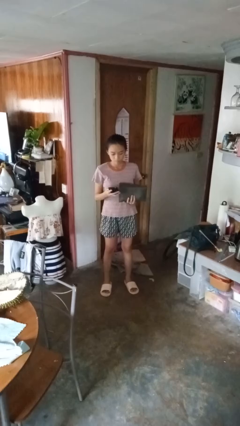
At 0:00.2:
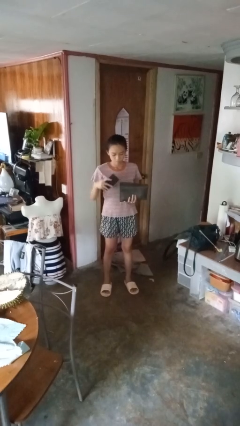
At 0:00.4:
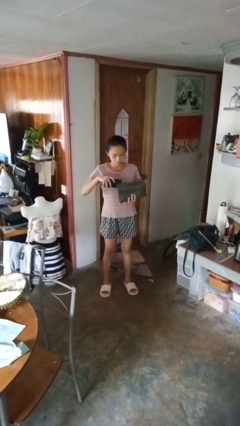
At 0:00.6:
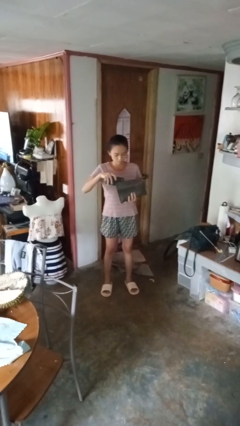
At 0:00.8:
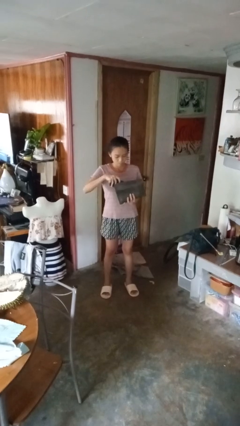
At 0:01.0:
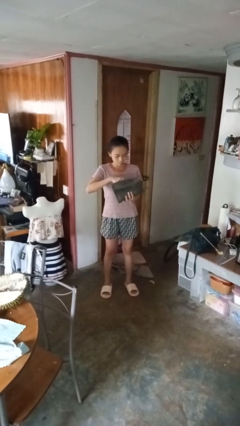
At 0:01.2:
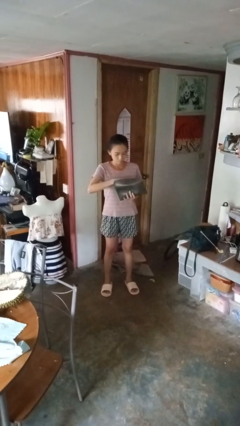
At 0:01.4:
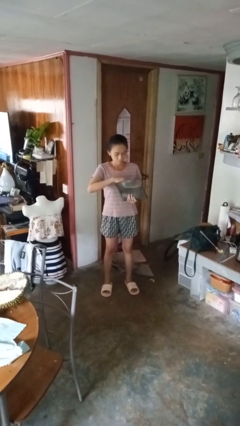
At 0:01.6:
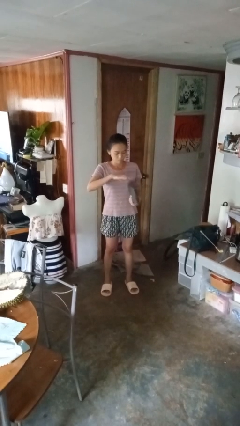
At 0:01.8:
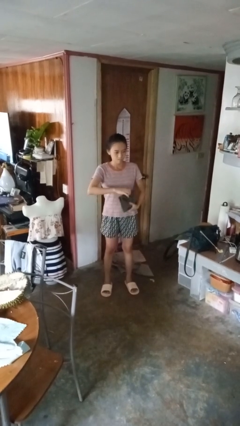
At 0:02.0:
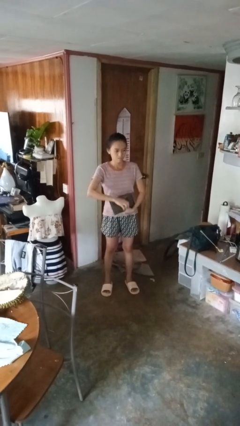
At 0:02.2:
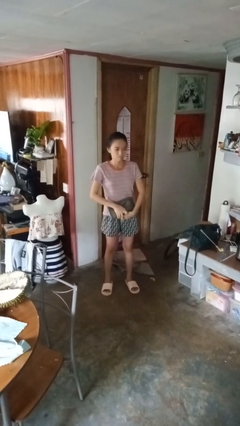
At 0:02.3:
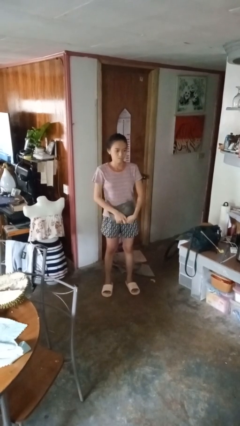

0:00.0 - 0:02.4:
person puts object into purse

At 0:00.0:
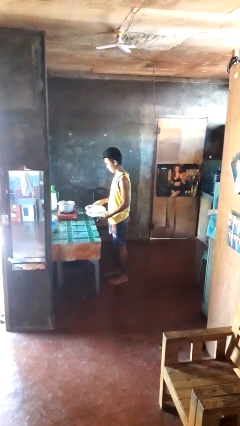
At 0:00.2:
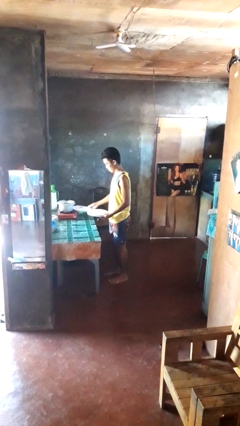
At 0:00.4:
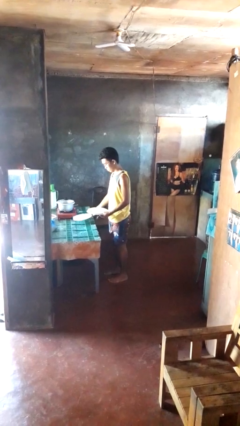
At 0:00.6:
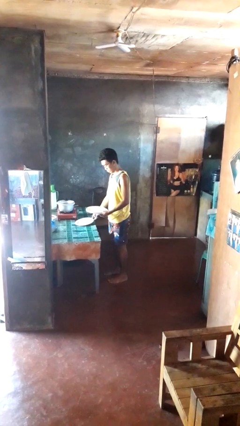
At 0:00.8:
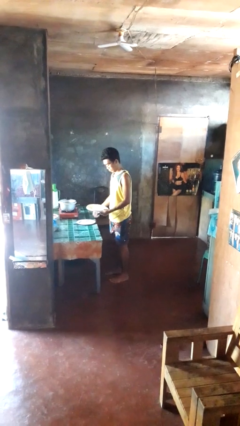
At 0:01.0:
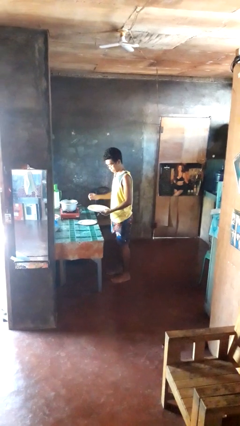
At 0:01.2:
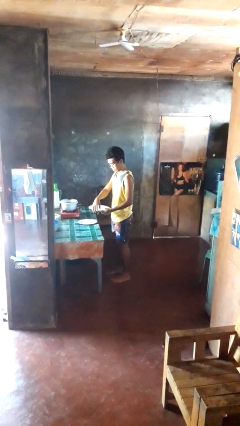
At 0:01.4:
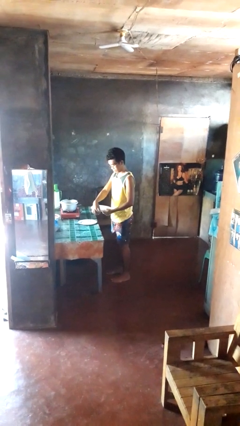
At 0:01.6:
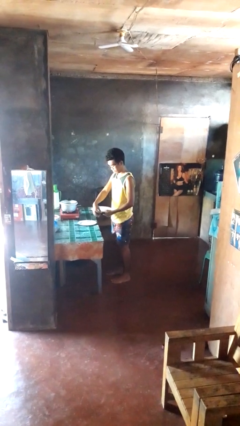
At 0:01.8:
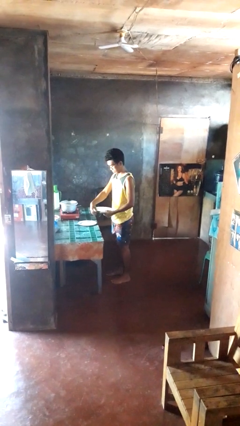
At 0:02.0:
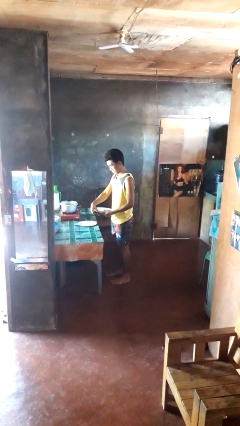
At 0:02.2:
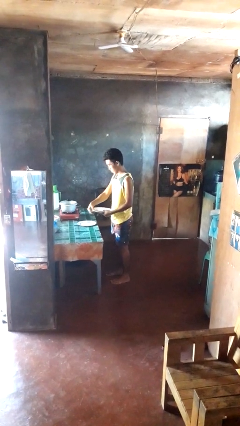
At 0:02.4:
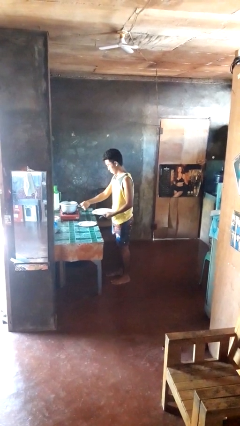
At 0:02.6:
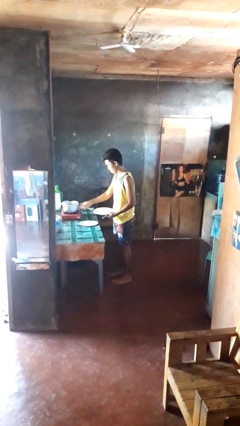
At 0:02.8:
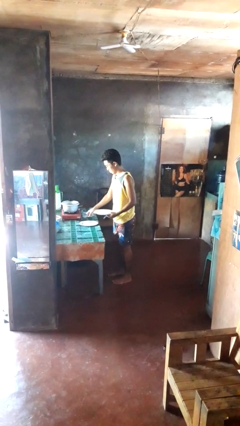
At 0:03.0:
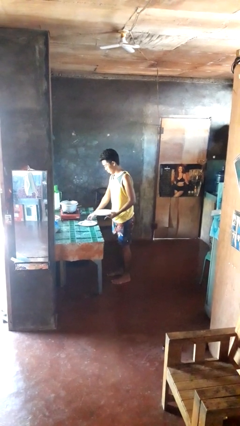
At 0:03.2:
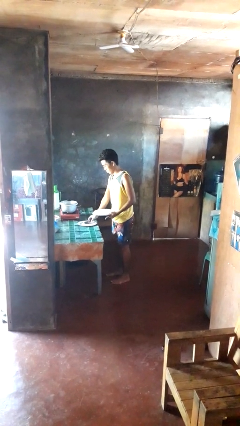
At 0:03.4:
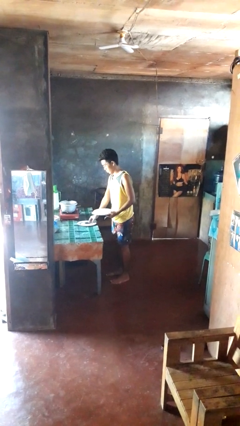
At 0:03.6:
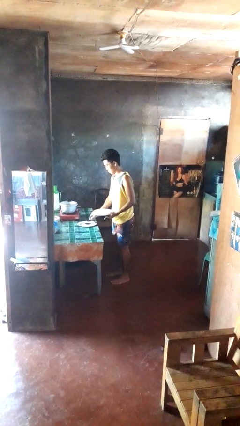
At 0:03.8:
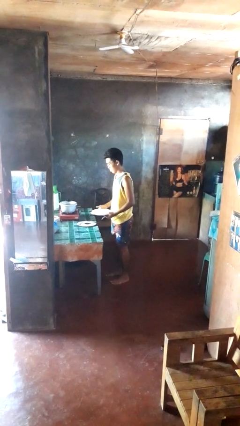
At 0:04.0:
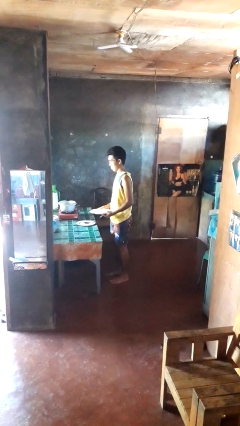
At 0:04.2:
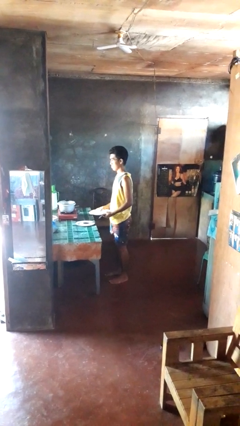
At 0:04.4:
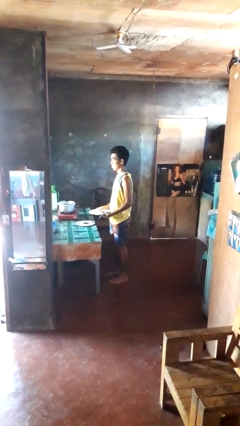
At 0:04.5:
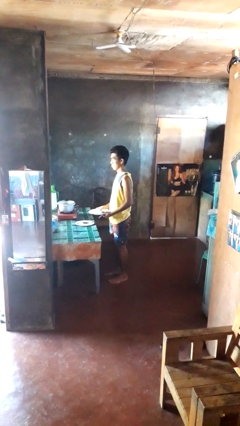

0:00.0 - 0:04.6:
person sets table

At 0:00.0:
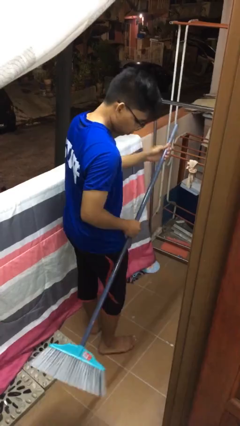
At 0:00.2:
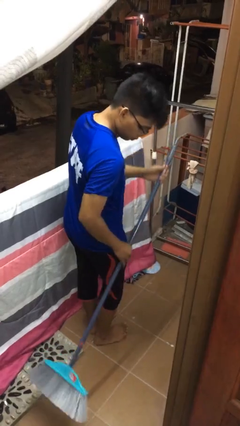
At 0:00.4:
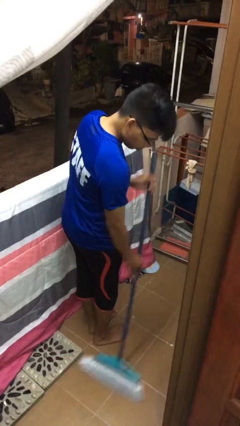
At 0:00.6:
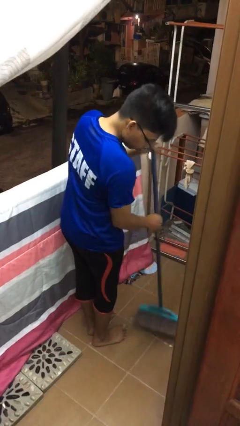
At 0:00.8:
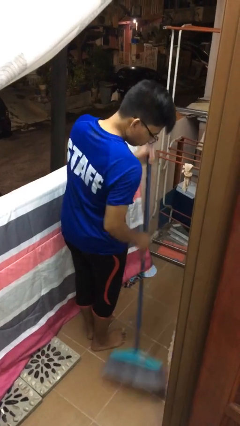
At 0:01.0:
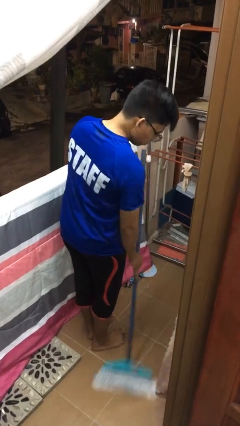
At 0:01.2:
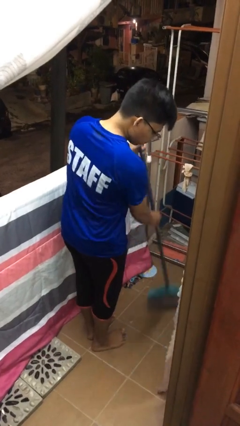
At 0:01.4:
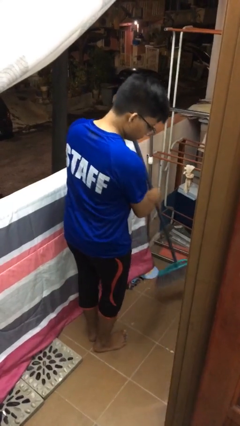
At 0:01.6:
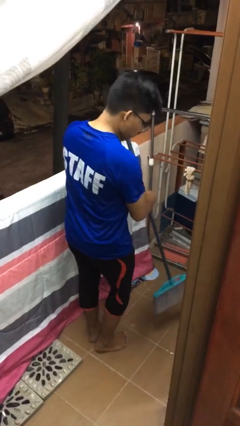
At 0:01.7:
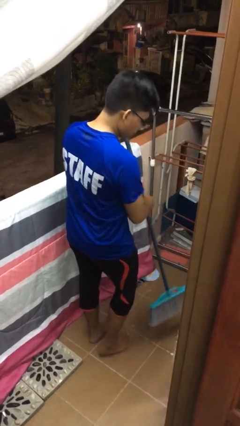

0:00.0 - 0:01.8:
person sweeps floor

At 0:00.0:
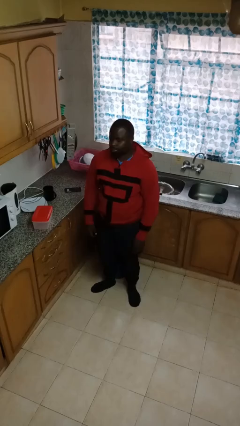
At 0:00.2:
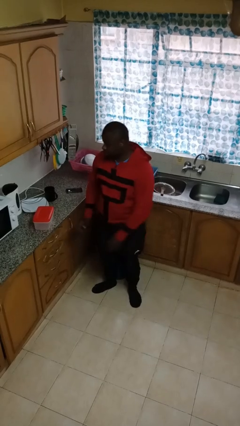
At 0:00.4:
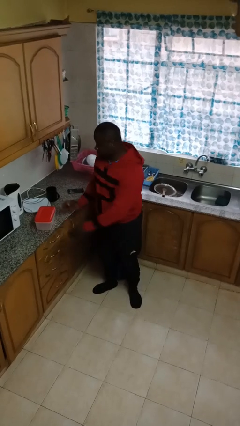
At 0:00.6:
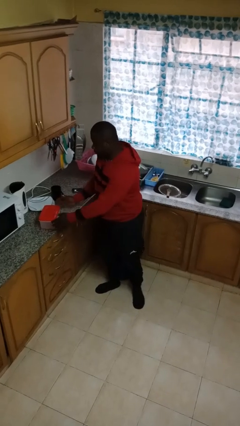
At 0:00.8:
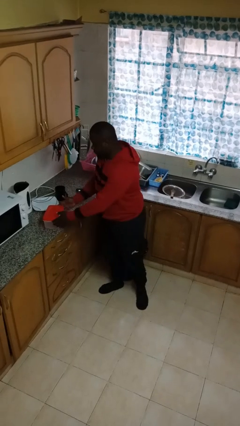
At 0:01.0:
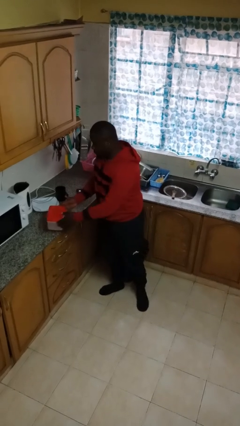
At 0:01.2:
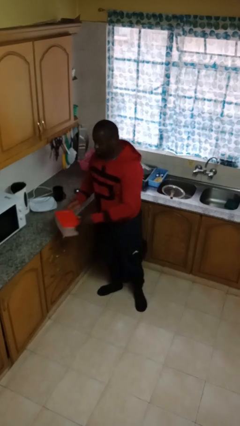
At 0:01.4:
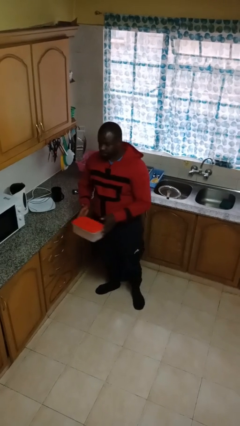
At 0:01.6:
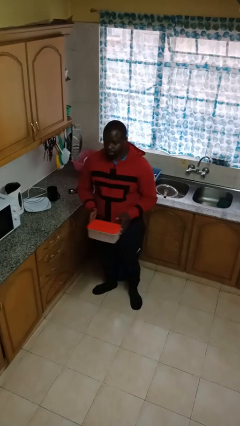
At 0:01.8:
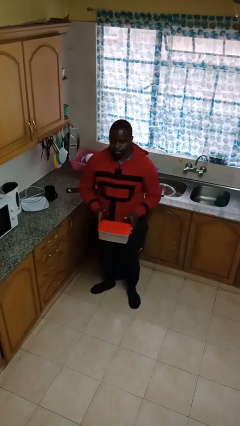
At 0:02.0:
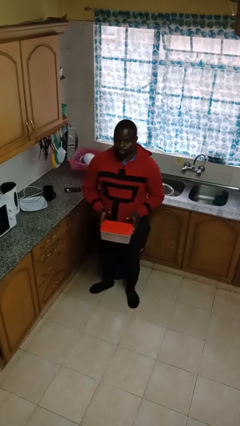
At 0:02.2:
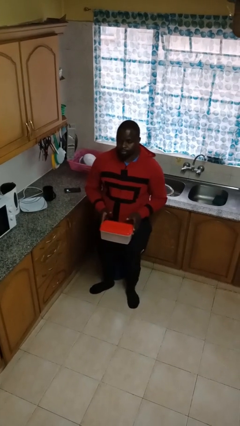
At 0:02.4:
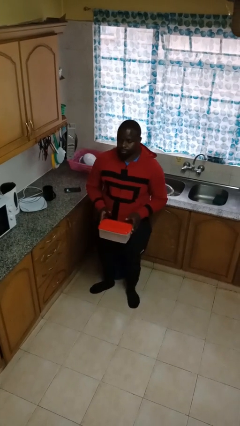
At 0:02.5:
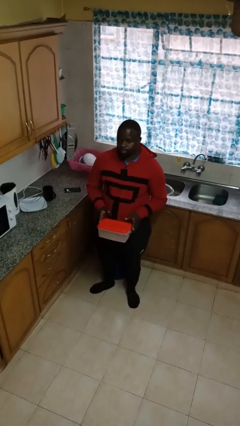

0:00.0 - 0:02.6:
person picks up object from countertop

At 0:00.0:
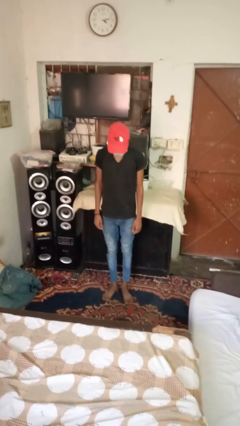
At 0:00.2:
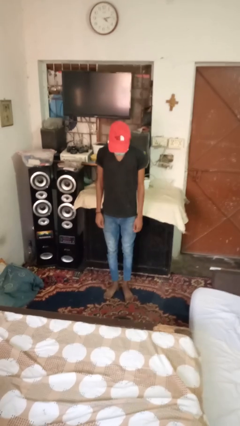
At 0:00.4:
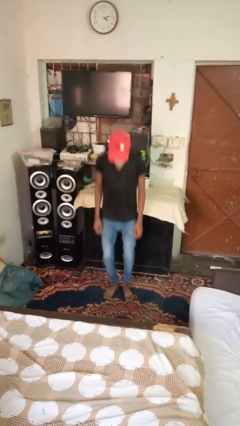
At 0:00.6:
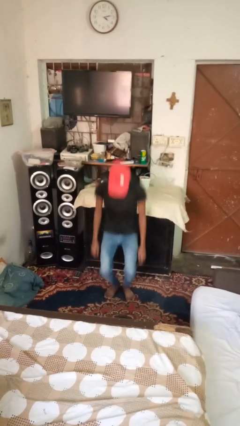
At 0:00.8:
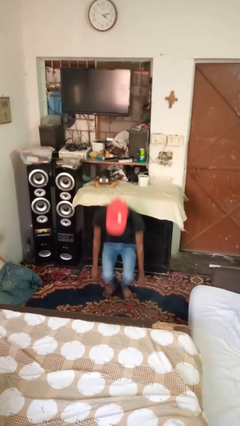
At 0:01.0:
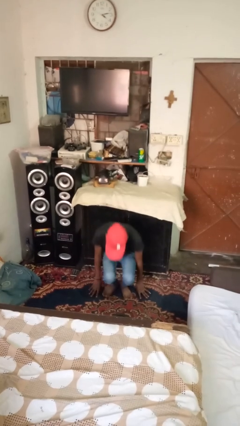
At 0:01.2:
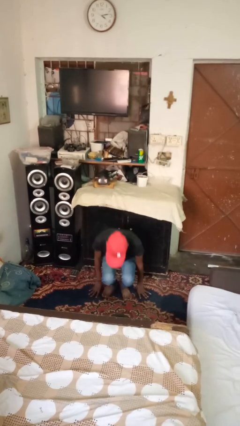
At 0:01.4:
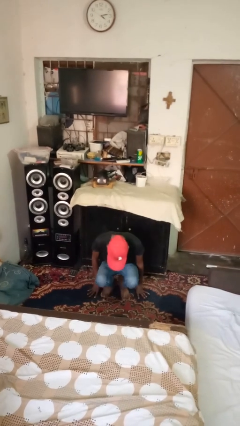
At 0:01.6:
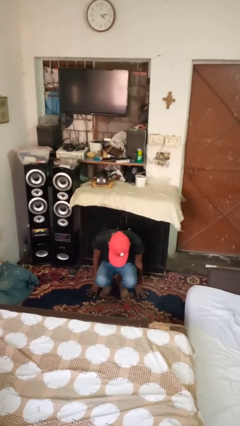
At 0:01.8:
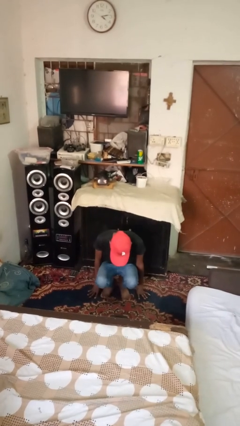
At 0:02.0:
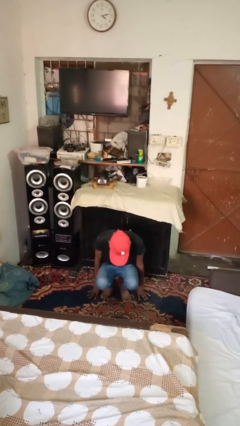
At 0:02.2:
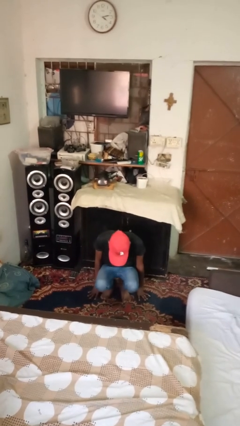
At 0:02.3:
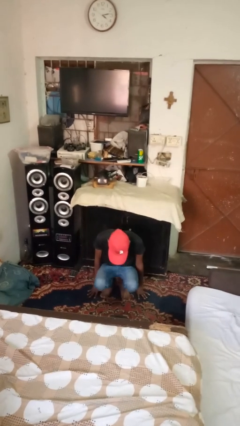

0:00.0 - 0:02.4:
person falls while standing

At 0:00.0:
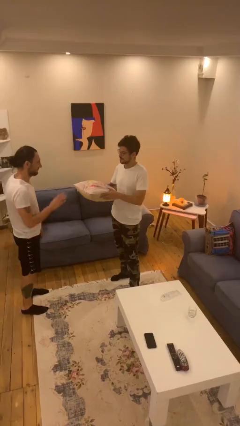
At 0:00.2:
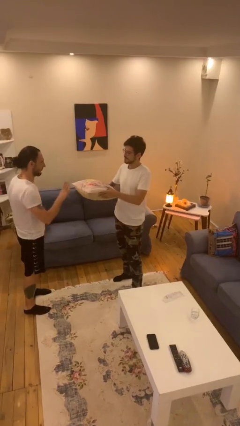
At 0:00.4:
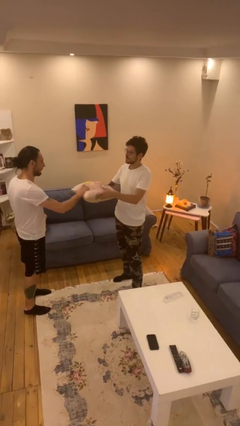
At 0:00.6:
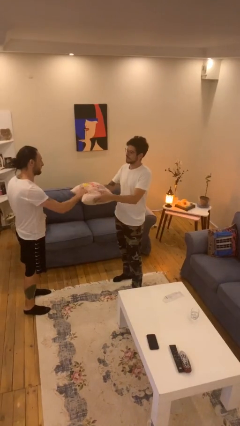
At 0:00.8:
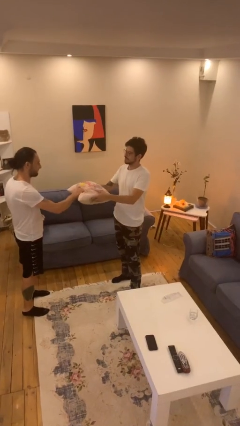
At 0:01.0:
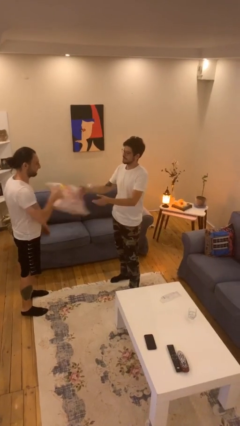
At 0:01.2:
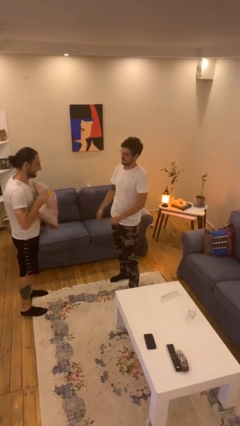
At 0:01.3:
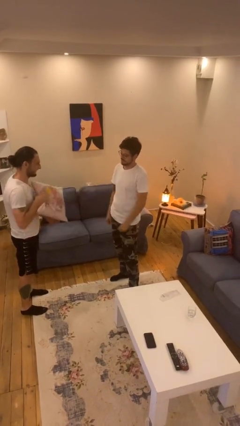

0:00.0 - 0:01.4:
person transfers object to person

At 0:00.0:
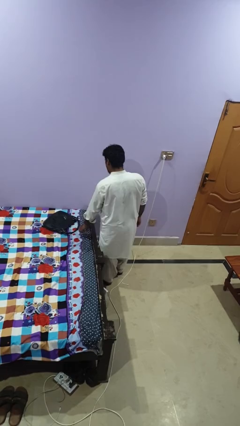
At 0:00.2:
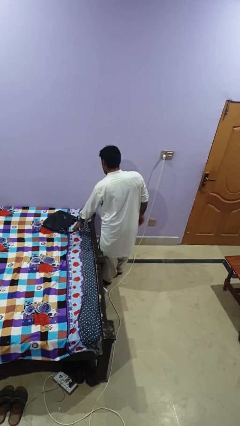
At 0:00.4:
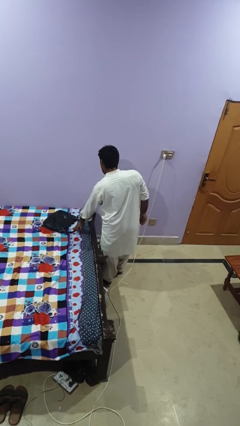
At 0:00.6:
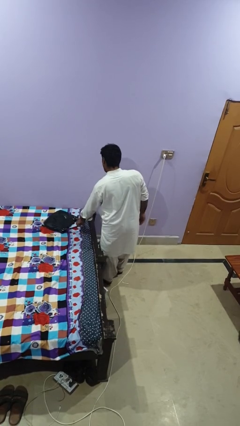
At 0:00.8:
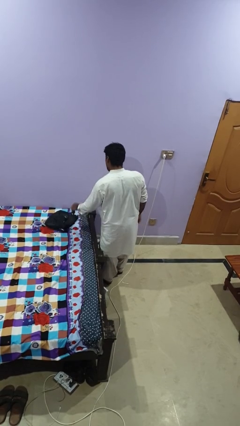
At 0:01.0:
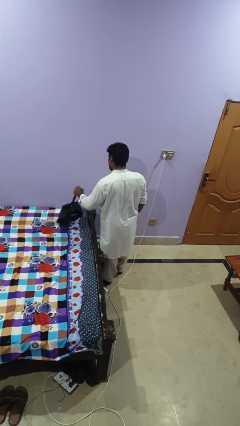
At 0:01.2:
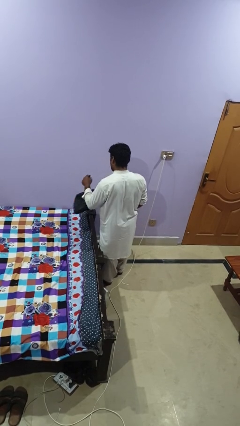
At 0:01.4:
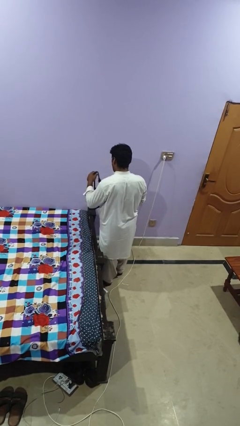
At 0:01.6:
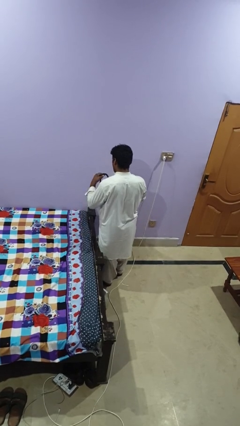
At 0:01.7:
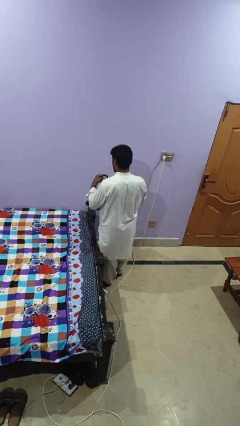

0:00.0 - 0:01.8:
person picks up object from bed

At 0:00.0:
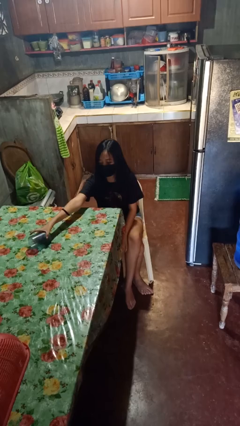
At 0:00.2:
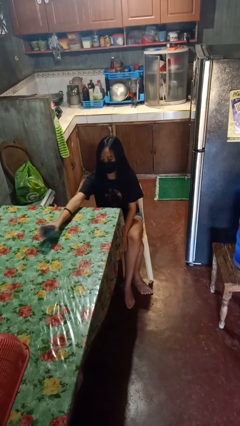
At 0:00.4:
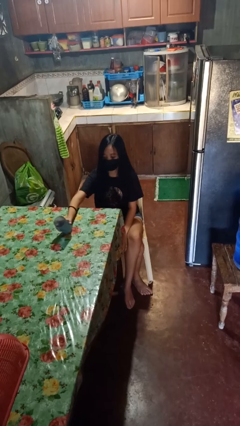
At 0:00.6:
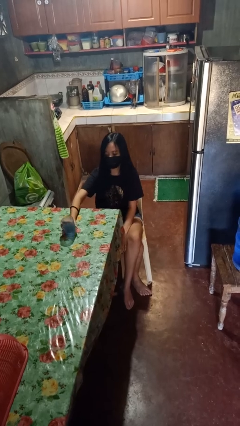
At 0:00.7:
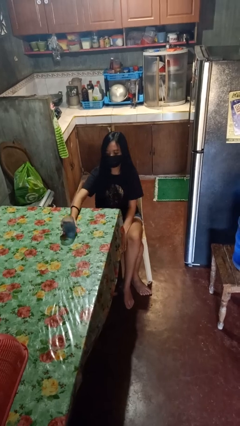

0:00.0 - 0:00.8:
person sets upright glass
